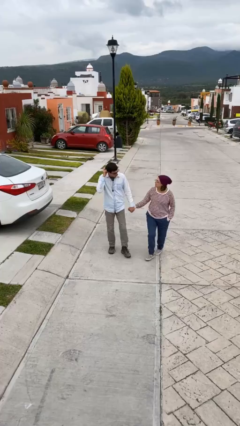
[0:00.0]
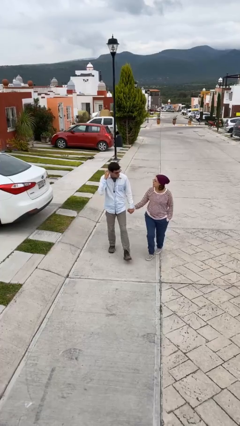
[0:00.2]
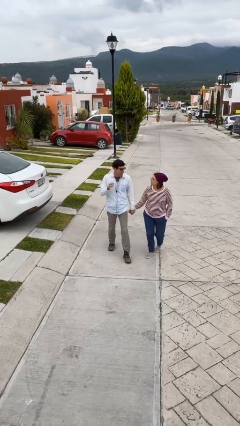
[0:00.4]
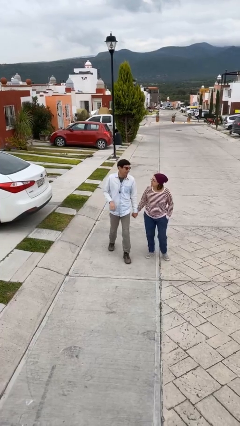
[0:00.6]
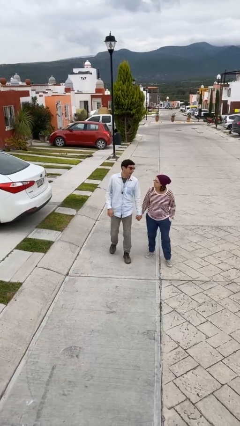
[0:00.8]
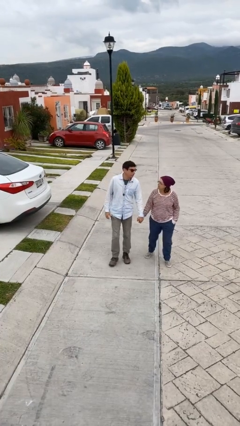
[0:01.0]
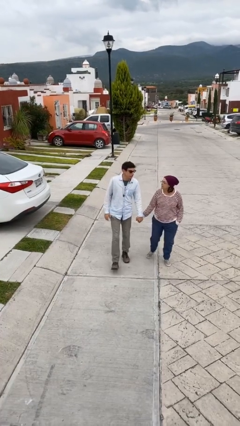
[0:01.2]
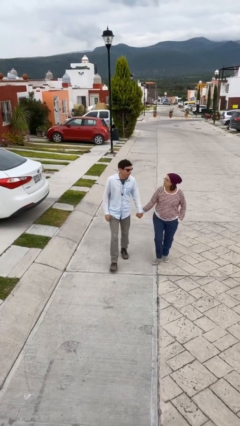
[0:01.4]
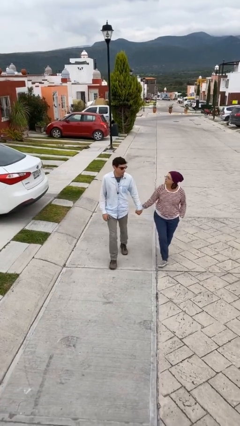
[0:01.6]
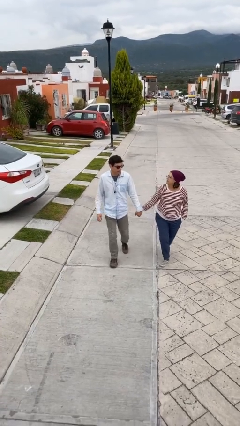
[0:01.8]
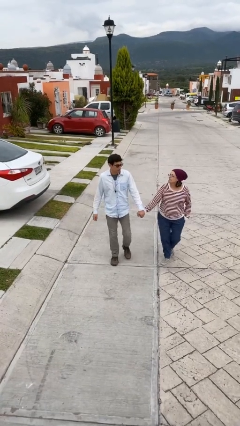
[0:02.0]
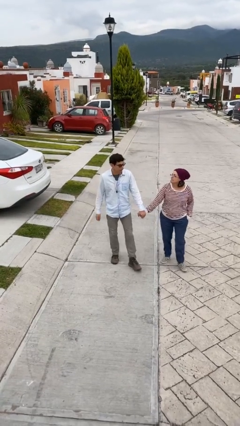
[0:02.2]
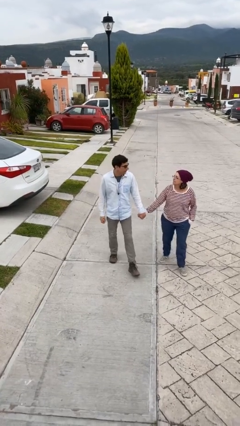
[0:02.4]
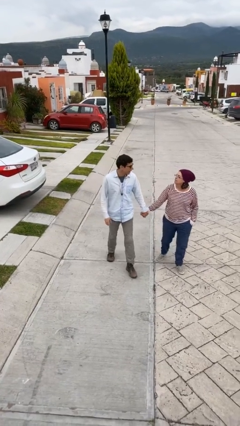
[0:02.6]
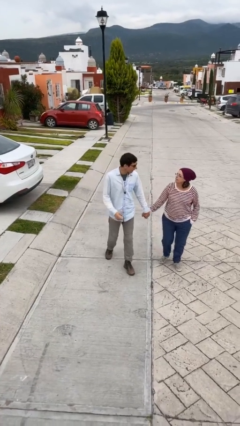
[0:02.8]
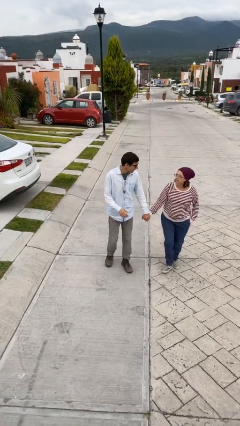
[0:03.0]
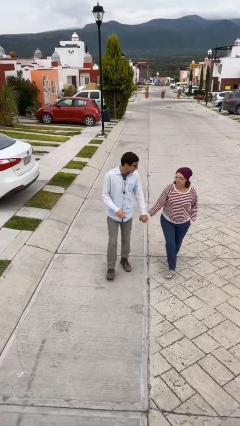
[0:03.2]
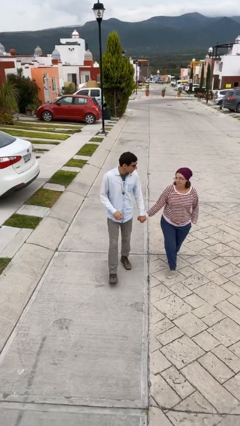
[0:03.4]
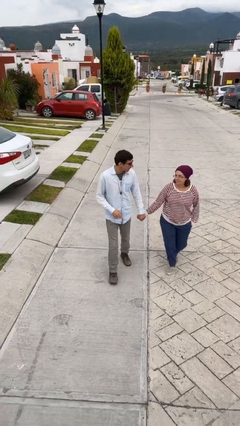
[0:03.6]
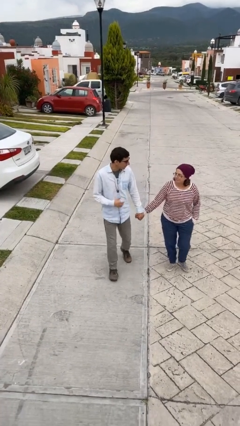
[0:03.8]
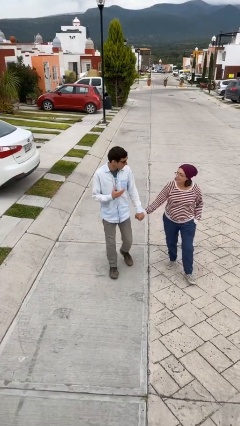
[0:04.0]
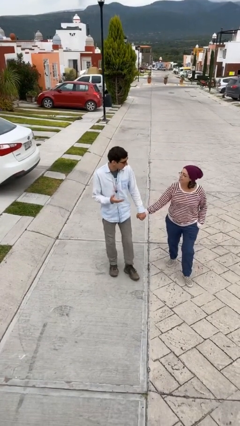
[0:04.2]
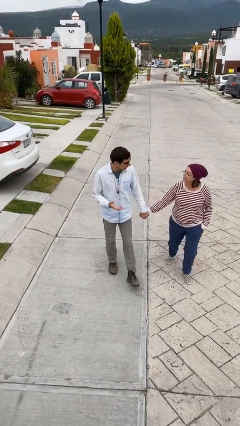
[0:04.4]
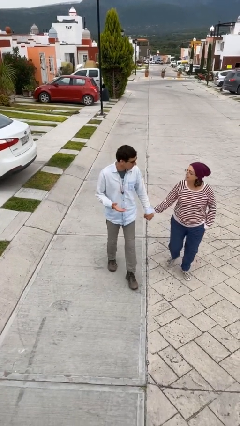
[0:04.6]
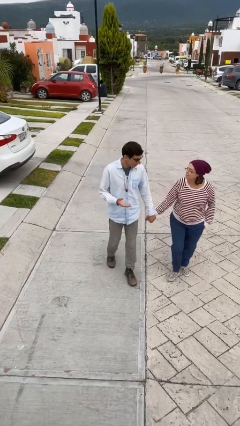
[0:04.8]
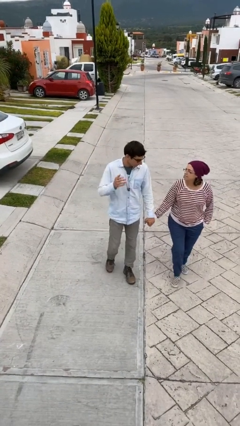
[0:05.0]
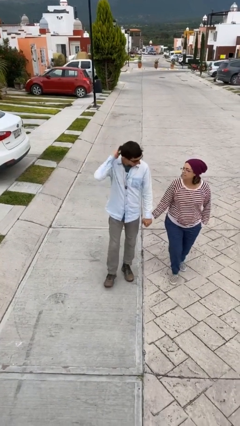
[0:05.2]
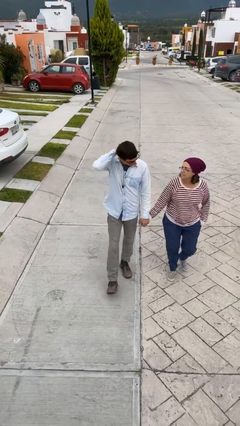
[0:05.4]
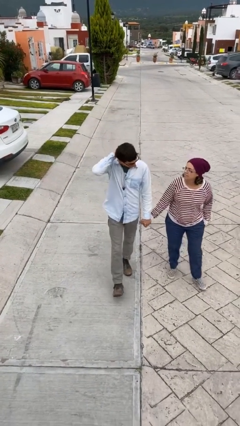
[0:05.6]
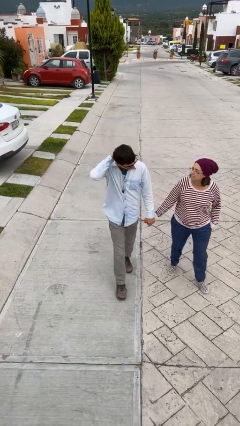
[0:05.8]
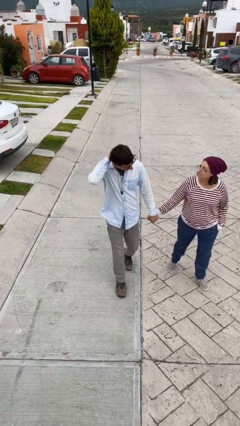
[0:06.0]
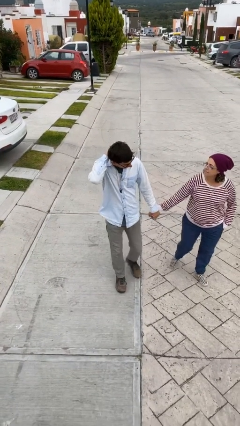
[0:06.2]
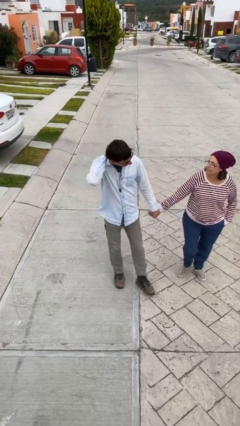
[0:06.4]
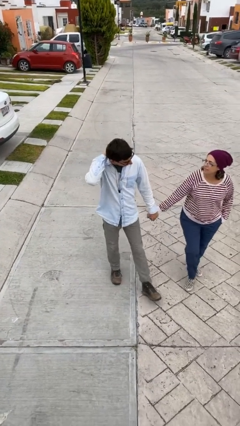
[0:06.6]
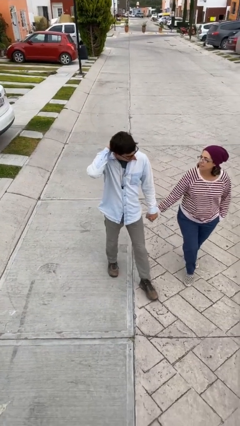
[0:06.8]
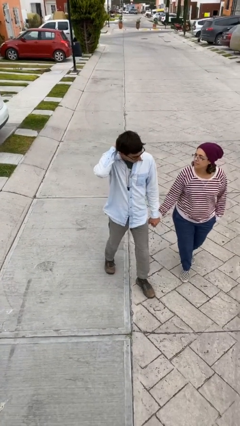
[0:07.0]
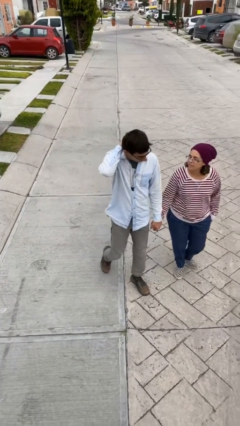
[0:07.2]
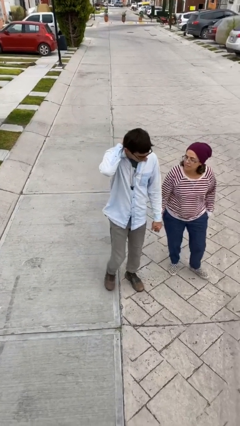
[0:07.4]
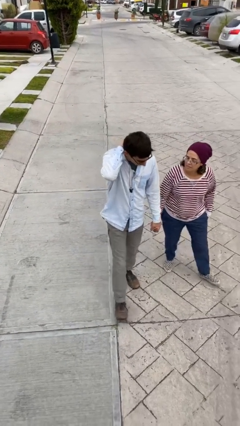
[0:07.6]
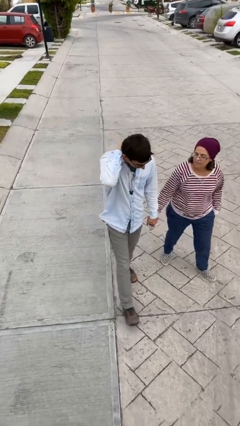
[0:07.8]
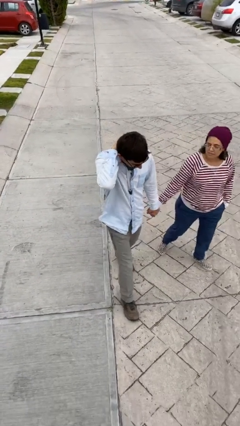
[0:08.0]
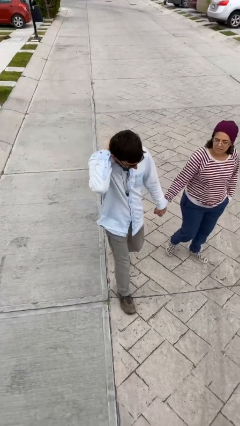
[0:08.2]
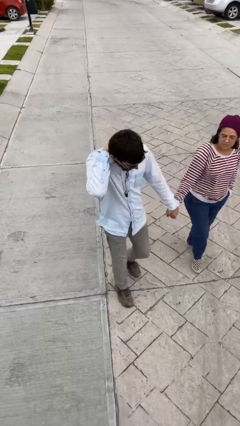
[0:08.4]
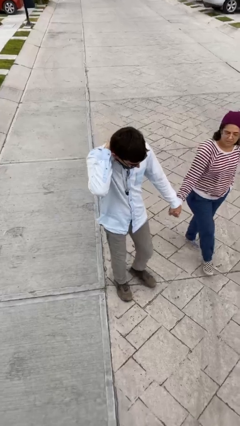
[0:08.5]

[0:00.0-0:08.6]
person holds hand

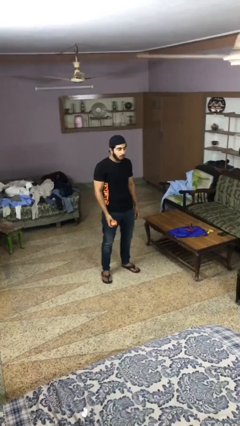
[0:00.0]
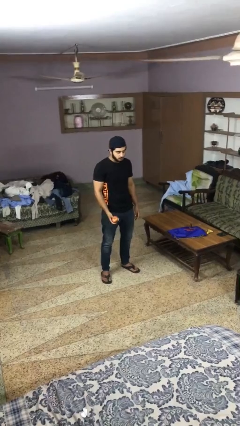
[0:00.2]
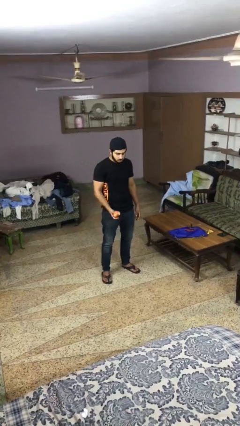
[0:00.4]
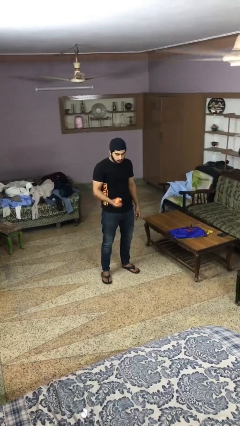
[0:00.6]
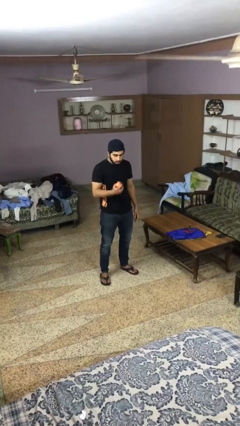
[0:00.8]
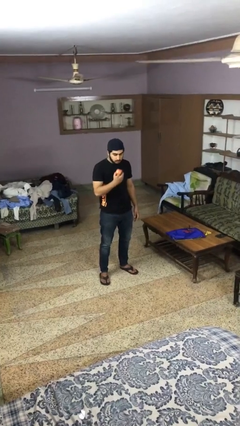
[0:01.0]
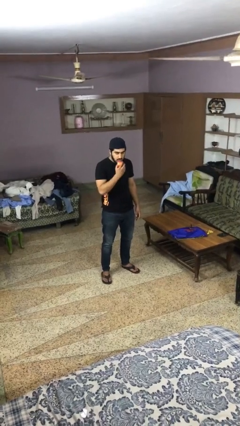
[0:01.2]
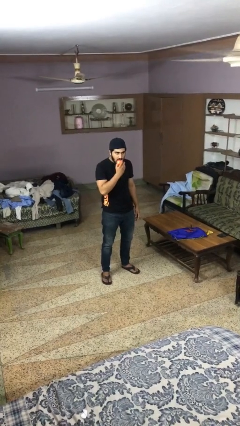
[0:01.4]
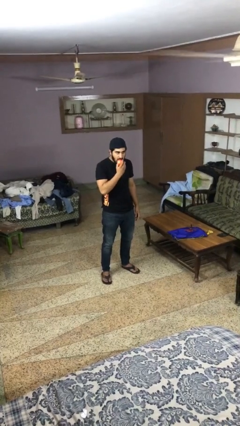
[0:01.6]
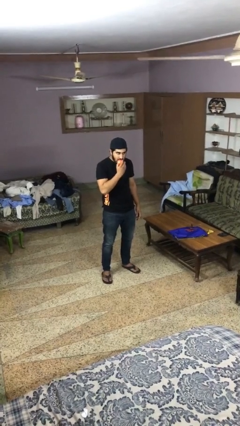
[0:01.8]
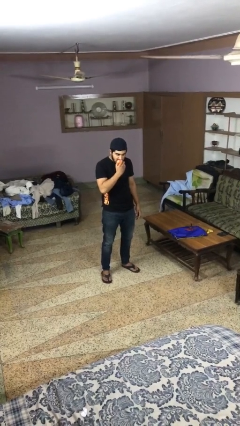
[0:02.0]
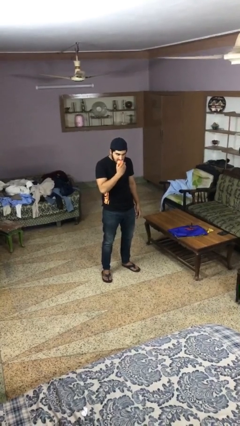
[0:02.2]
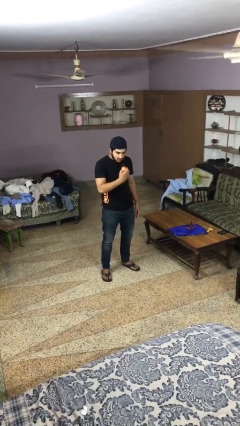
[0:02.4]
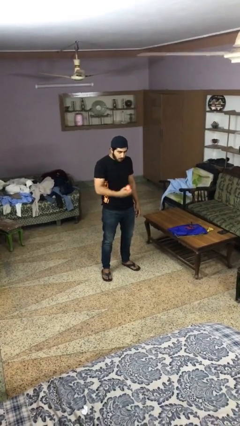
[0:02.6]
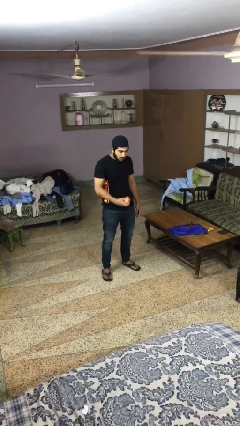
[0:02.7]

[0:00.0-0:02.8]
person eats apple

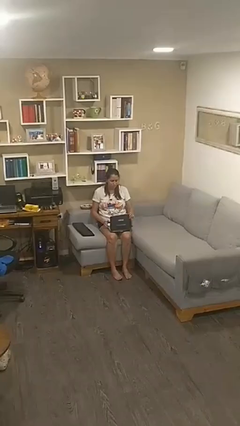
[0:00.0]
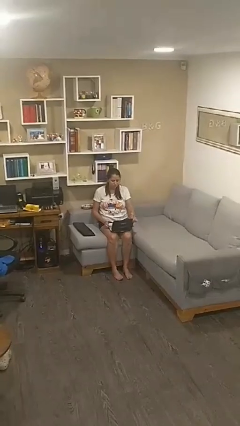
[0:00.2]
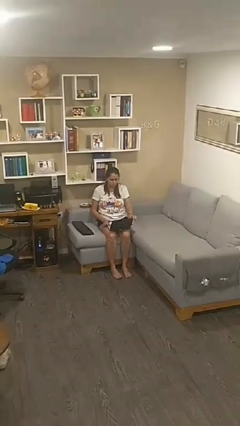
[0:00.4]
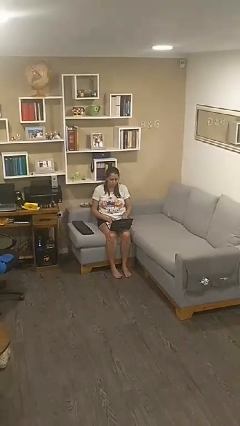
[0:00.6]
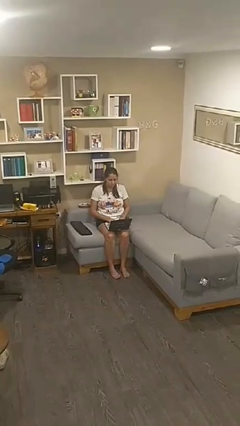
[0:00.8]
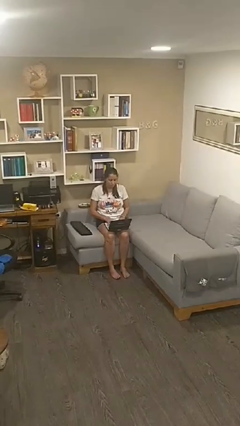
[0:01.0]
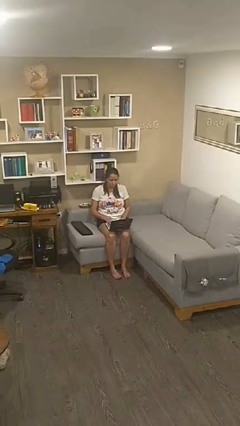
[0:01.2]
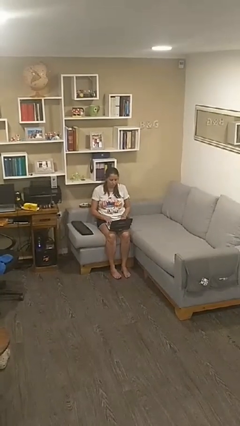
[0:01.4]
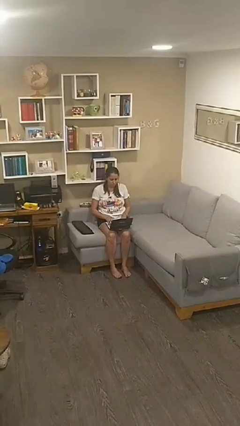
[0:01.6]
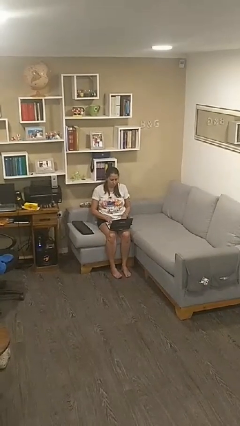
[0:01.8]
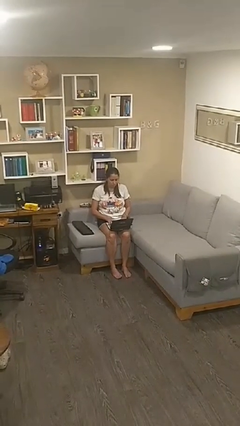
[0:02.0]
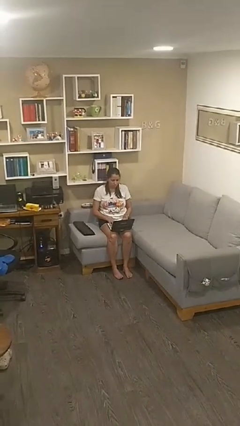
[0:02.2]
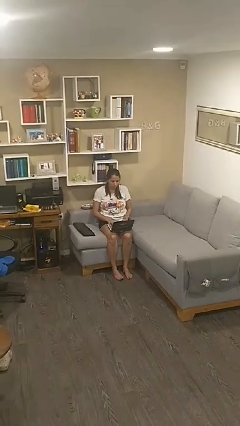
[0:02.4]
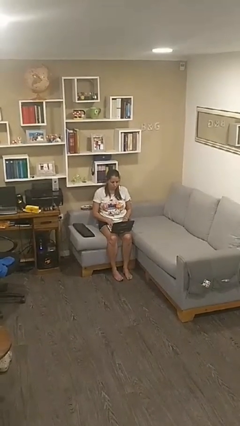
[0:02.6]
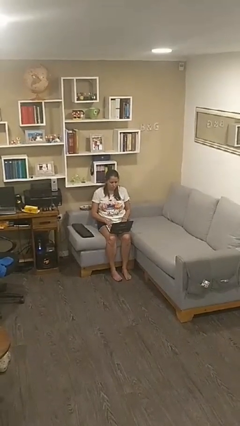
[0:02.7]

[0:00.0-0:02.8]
person interacts with laptop

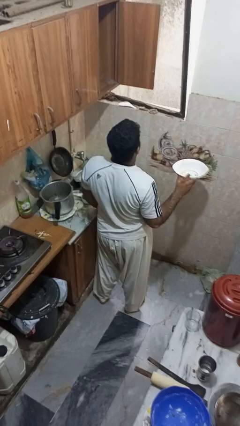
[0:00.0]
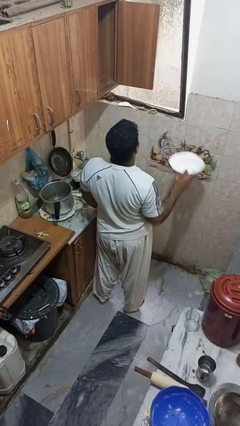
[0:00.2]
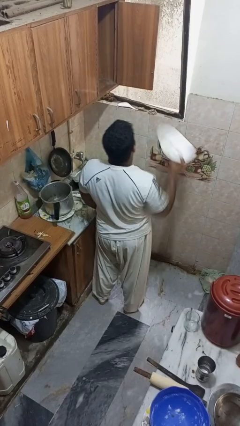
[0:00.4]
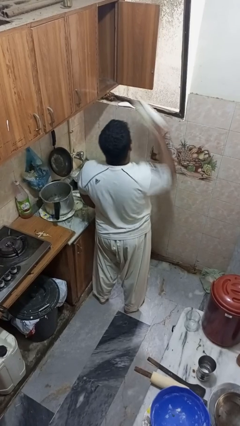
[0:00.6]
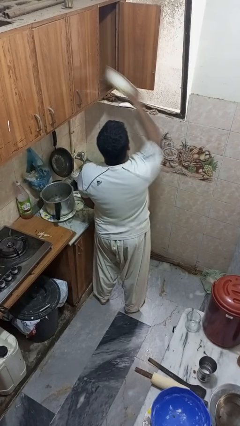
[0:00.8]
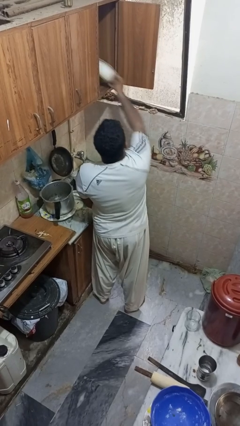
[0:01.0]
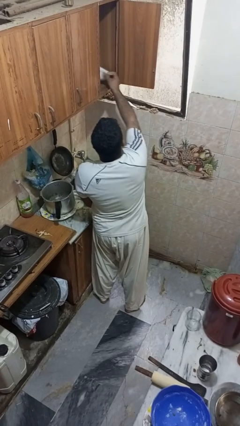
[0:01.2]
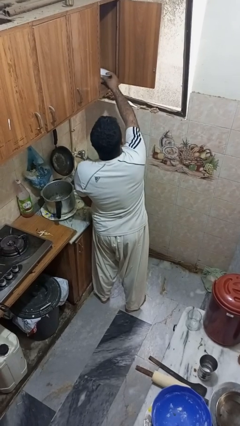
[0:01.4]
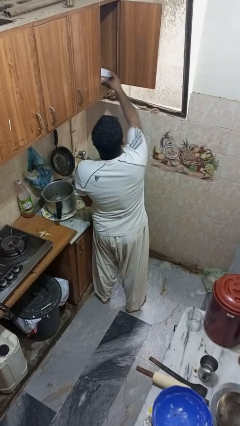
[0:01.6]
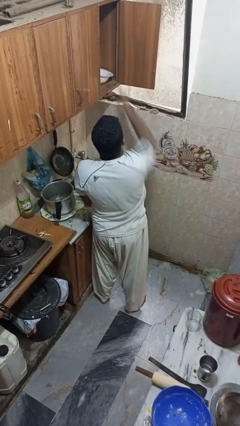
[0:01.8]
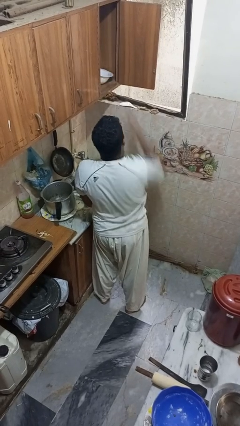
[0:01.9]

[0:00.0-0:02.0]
person puts object in cabinet

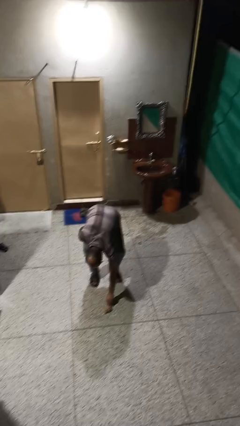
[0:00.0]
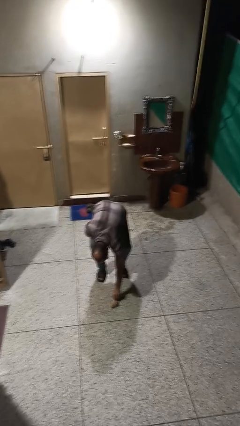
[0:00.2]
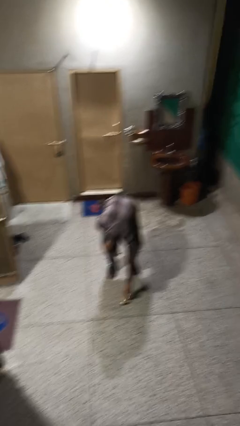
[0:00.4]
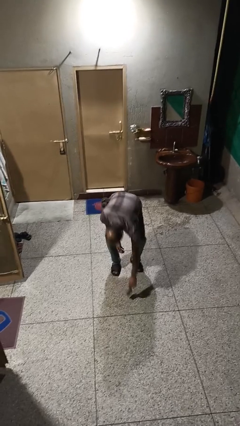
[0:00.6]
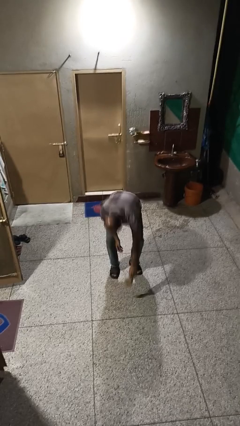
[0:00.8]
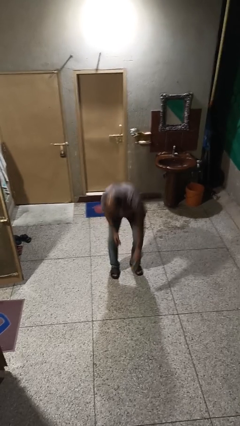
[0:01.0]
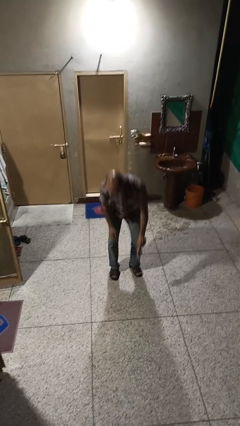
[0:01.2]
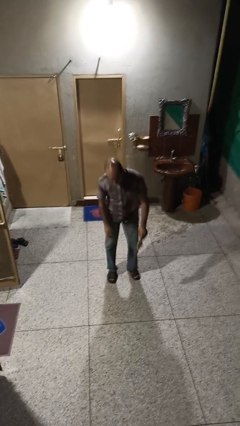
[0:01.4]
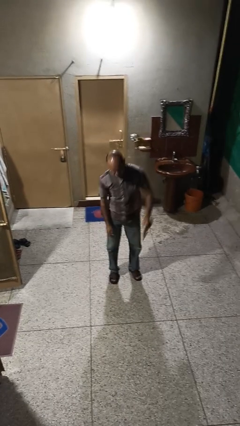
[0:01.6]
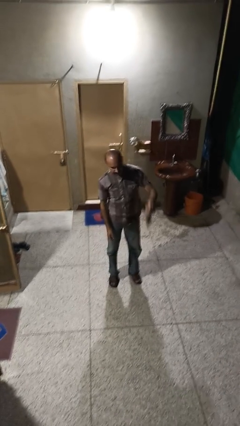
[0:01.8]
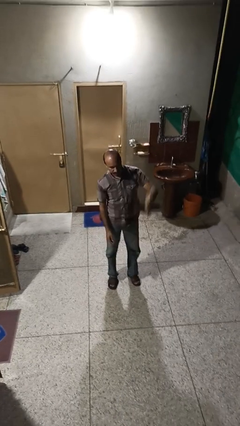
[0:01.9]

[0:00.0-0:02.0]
person picks up object from floor
